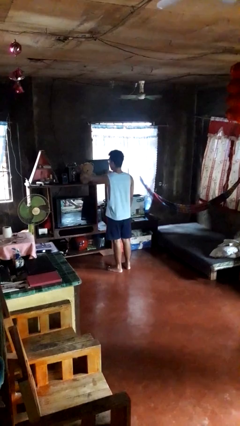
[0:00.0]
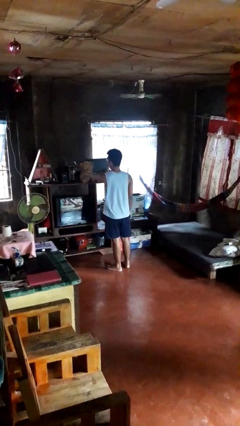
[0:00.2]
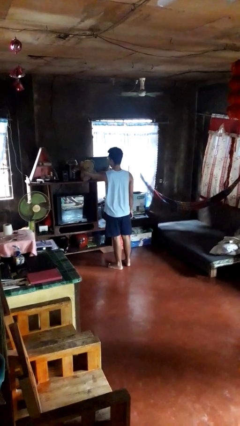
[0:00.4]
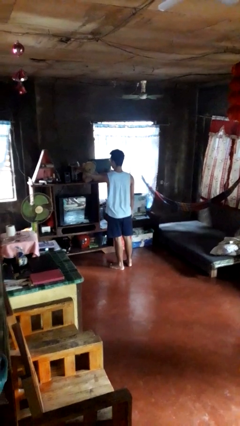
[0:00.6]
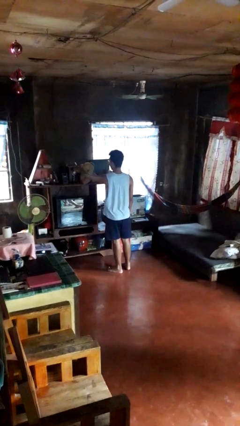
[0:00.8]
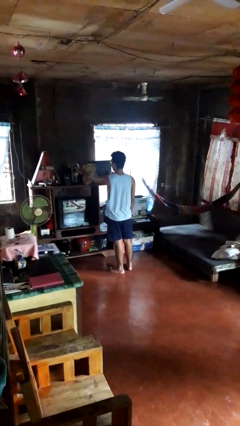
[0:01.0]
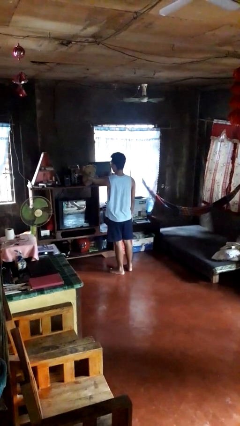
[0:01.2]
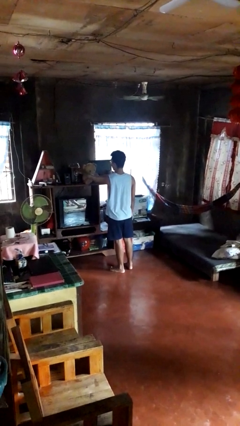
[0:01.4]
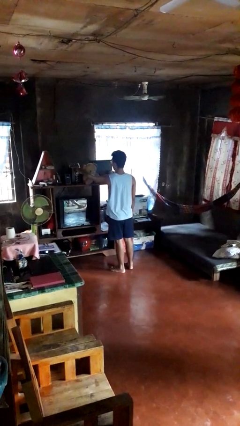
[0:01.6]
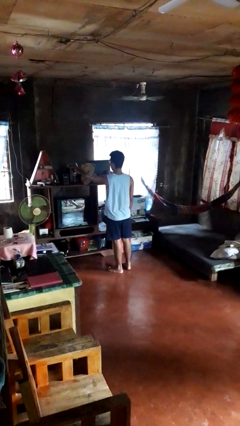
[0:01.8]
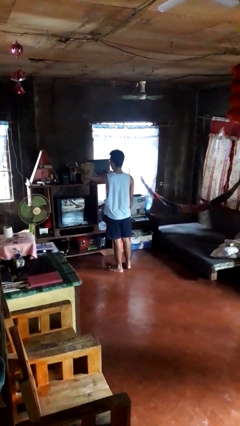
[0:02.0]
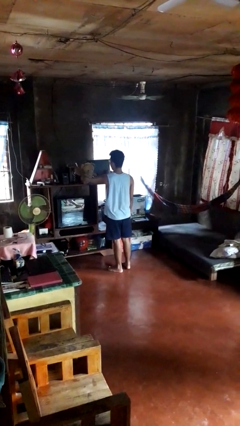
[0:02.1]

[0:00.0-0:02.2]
person taps object with finger

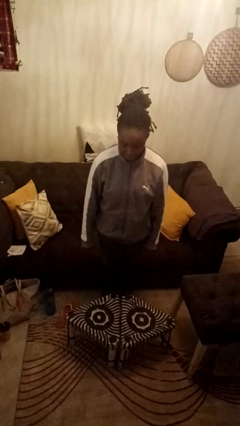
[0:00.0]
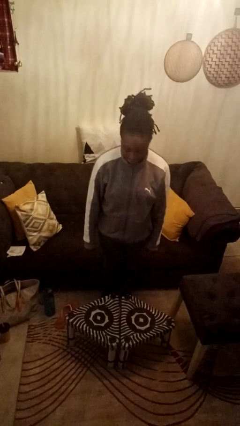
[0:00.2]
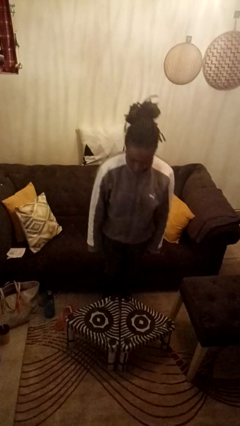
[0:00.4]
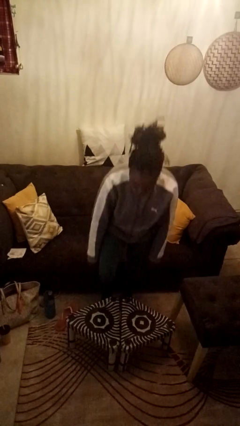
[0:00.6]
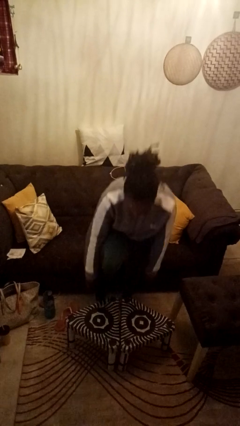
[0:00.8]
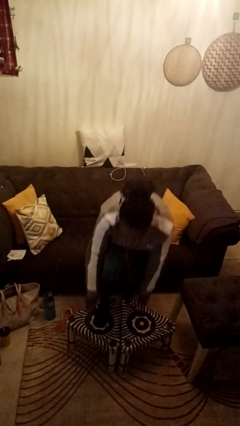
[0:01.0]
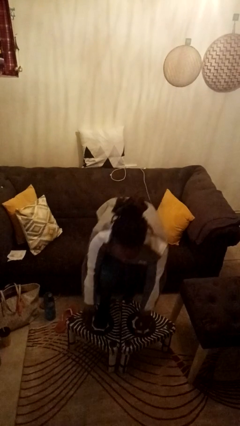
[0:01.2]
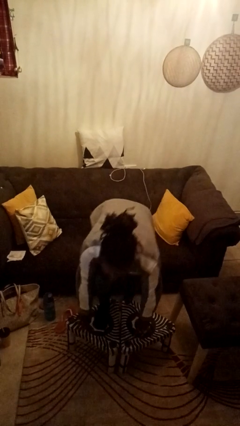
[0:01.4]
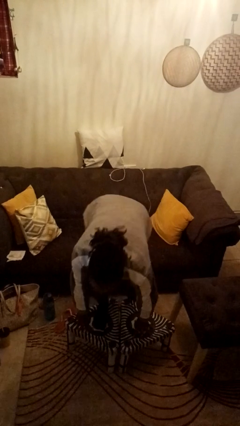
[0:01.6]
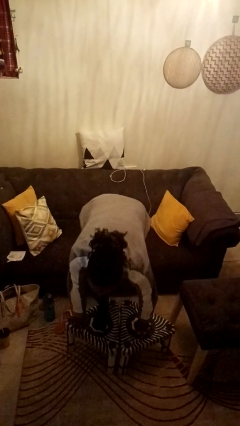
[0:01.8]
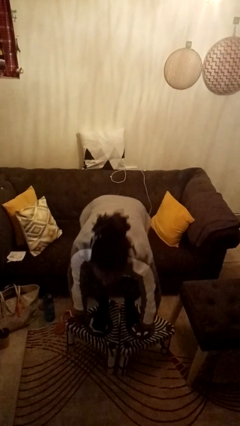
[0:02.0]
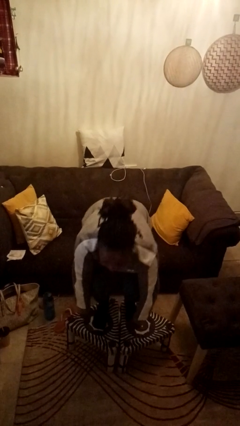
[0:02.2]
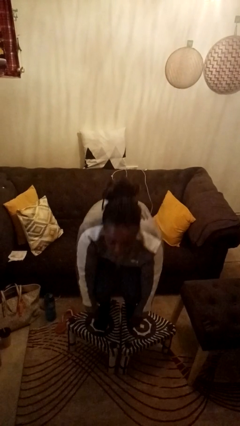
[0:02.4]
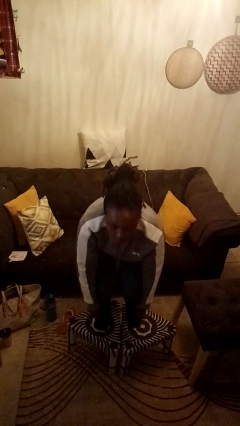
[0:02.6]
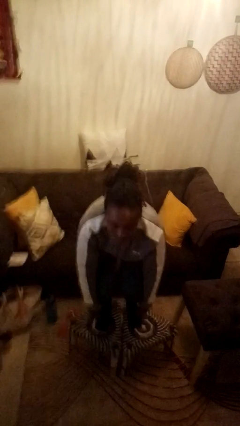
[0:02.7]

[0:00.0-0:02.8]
person climbs on table

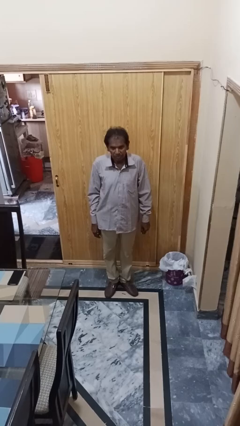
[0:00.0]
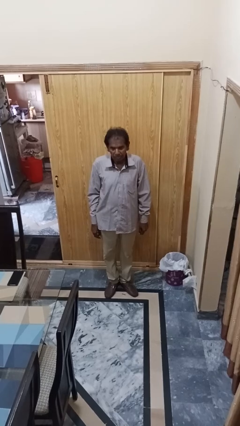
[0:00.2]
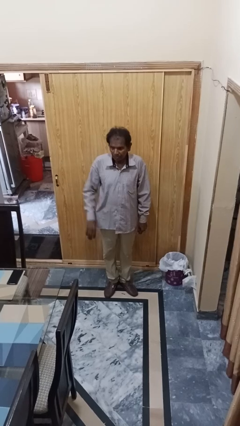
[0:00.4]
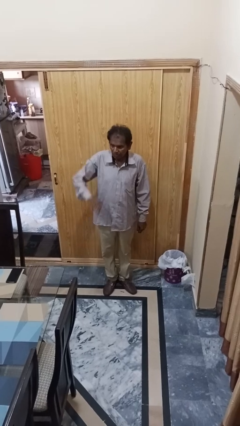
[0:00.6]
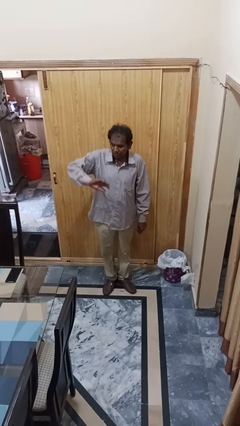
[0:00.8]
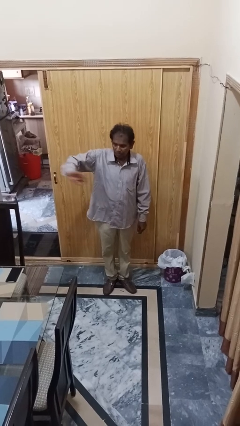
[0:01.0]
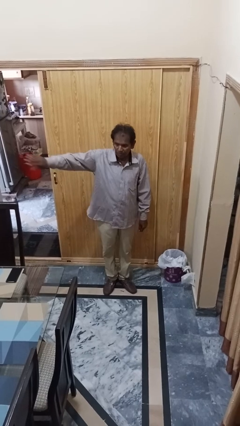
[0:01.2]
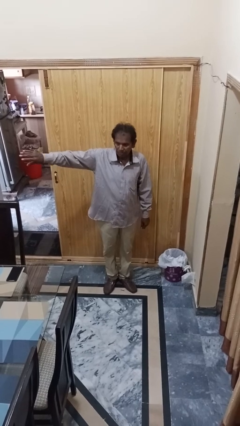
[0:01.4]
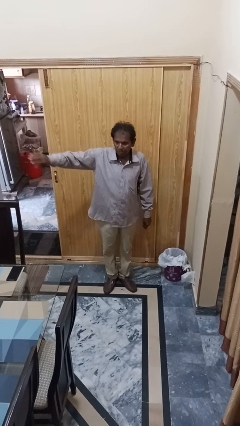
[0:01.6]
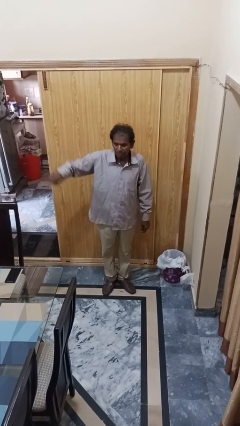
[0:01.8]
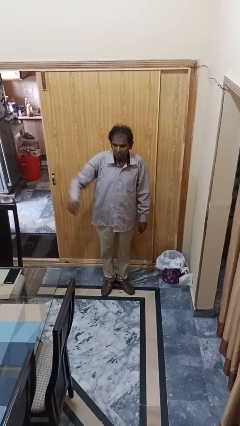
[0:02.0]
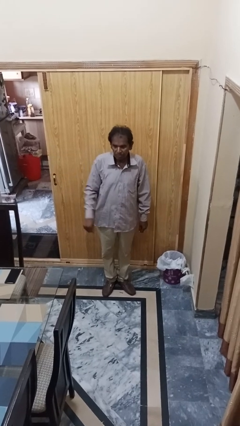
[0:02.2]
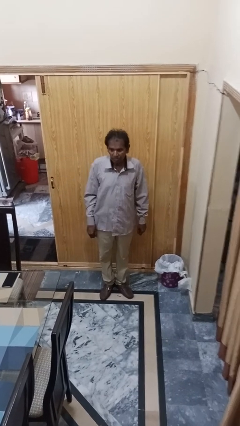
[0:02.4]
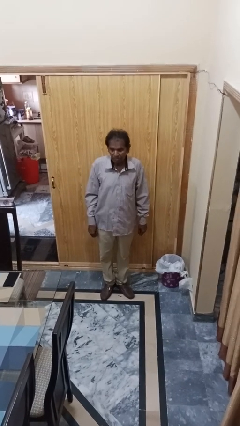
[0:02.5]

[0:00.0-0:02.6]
person gestures swipe left

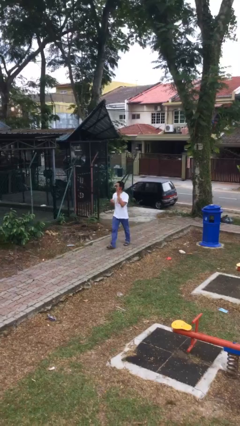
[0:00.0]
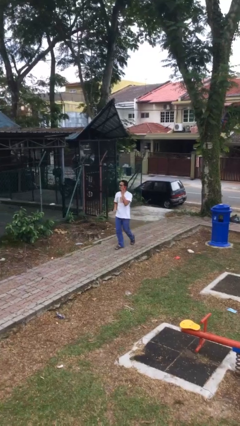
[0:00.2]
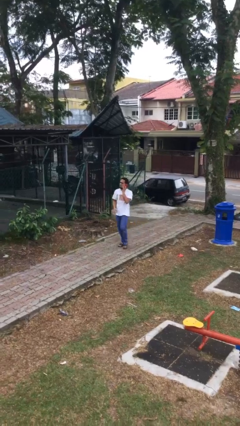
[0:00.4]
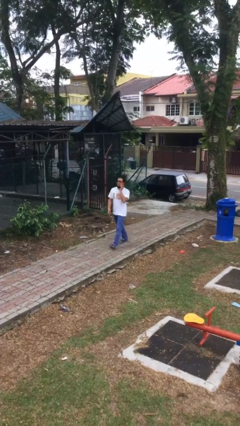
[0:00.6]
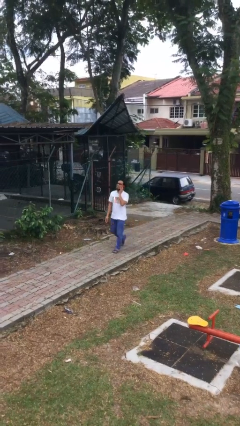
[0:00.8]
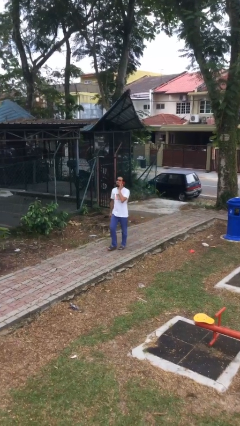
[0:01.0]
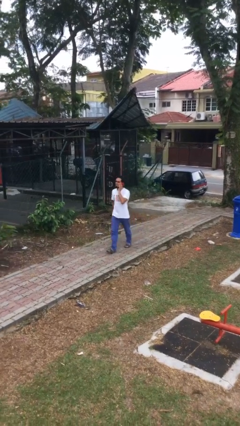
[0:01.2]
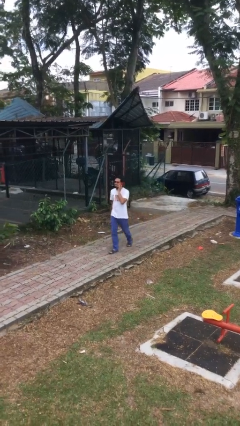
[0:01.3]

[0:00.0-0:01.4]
person talks on phone

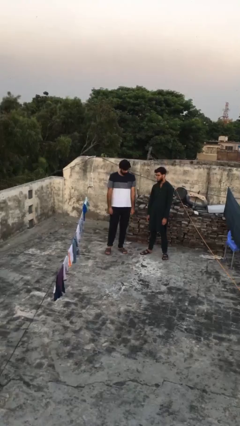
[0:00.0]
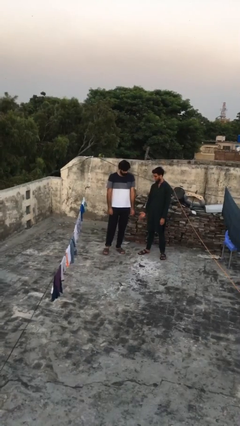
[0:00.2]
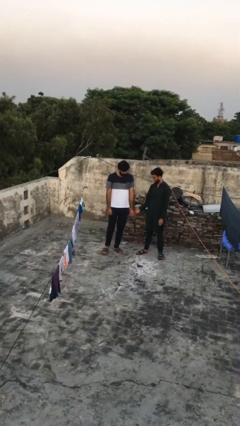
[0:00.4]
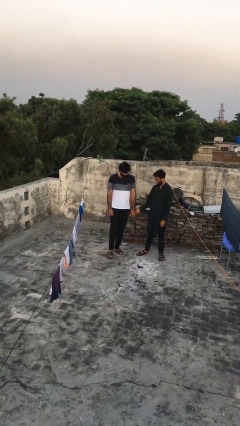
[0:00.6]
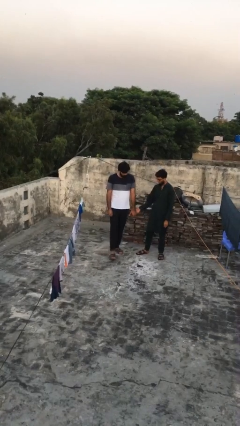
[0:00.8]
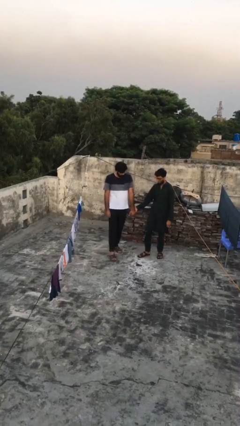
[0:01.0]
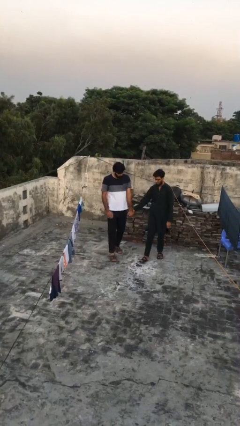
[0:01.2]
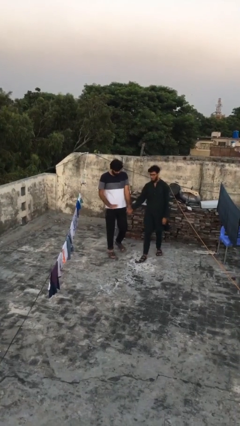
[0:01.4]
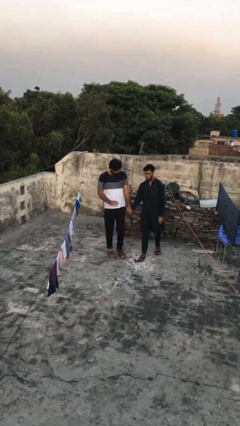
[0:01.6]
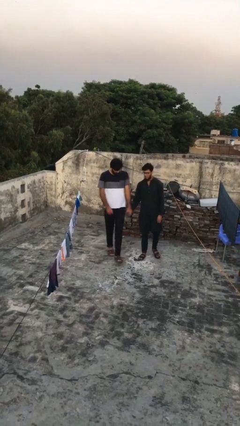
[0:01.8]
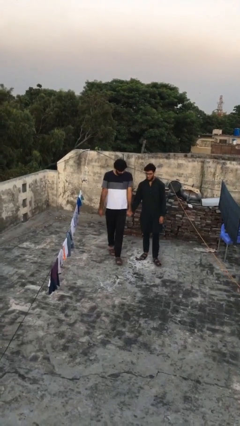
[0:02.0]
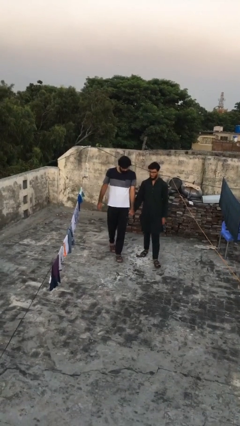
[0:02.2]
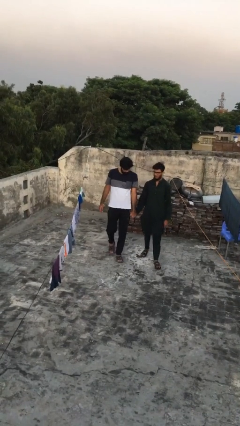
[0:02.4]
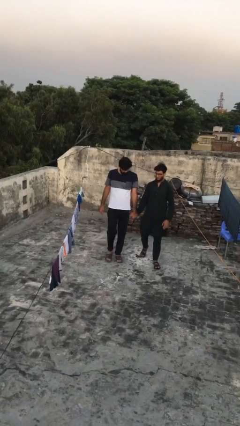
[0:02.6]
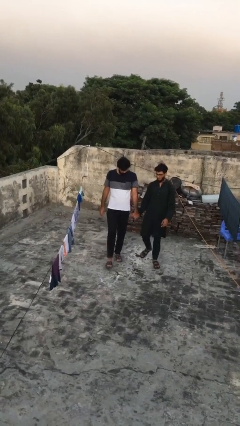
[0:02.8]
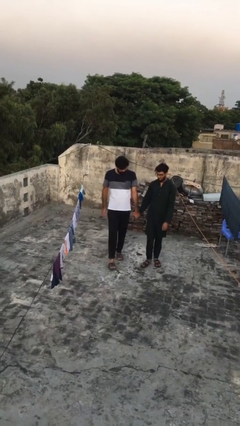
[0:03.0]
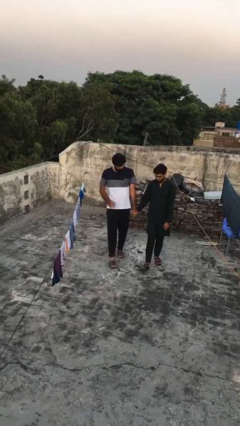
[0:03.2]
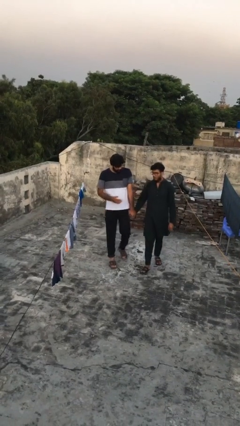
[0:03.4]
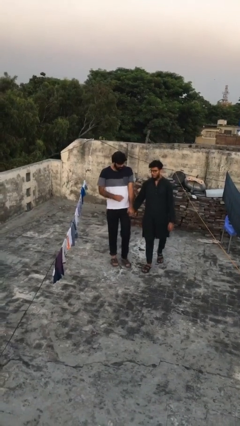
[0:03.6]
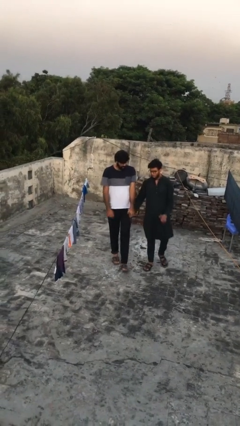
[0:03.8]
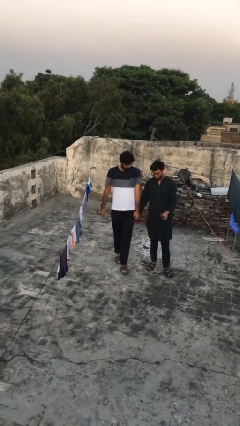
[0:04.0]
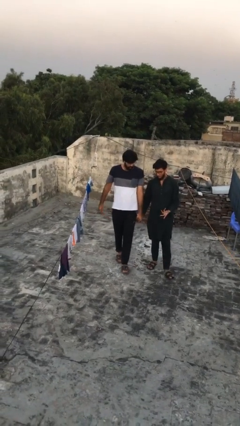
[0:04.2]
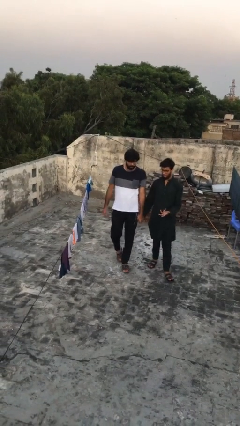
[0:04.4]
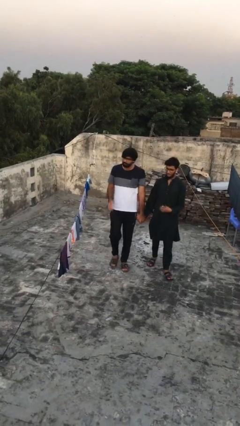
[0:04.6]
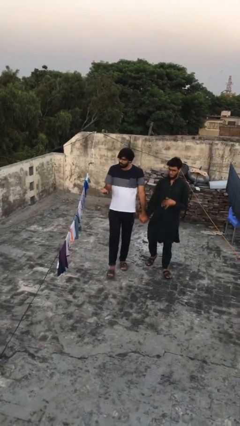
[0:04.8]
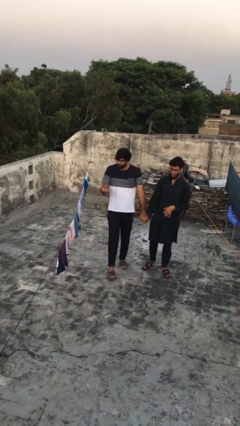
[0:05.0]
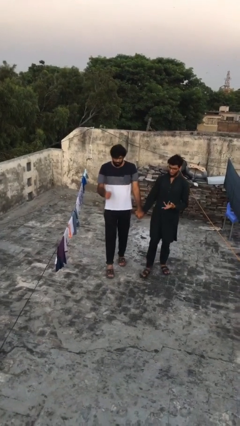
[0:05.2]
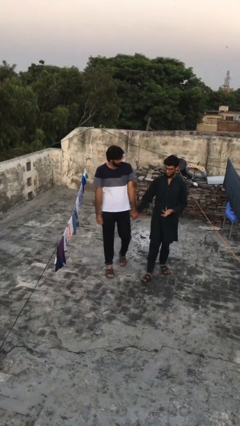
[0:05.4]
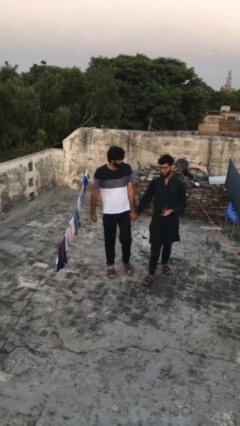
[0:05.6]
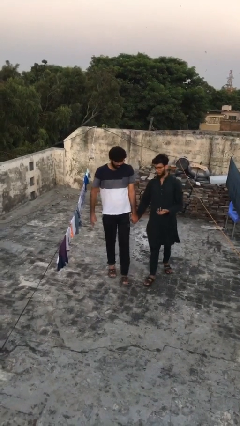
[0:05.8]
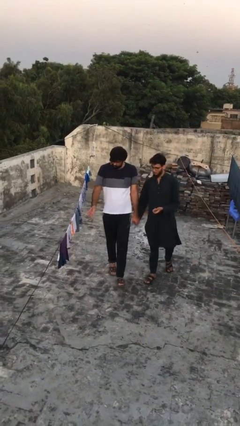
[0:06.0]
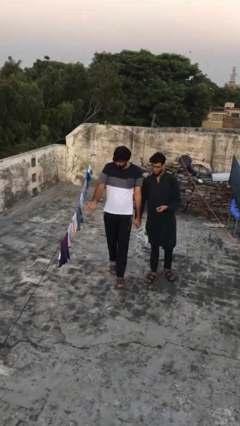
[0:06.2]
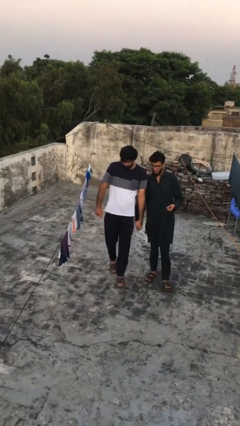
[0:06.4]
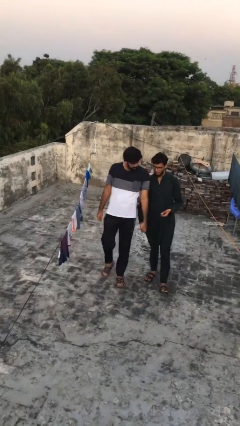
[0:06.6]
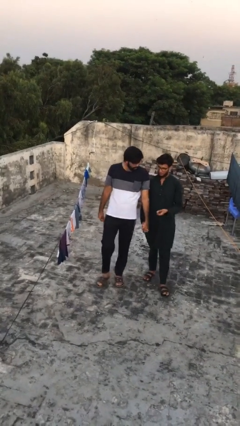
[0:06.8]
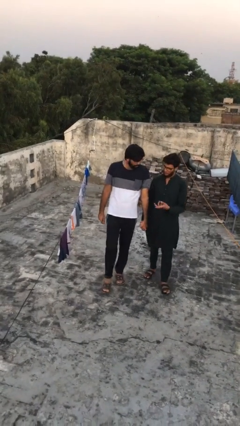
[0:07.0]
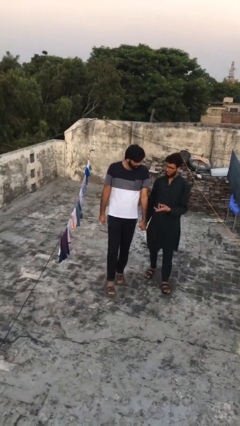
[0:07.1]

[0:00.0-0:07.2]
person holds hand

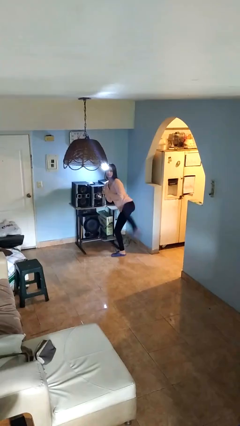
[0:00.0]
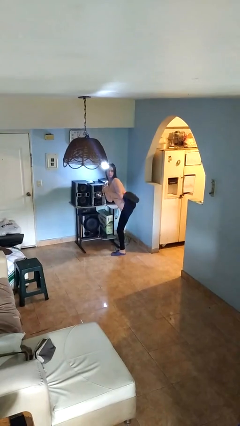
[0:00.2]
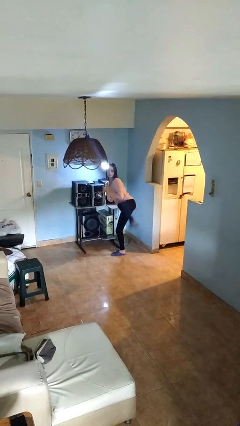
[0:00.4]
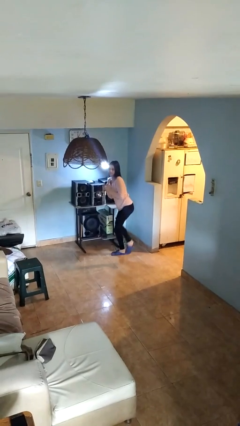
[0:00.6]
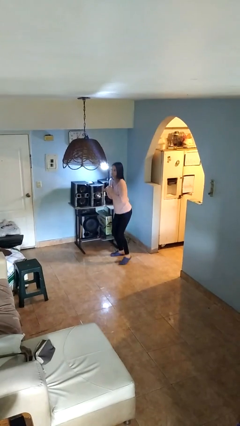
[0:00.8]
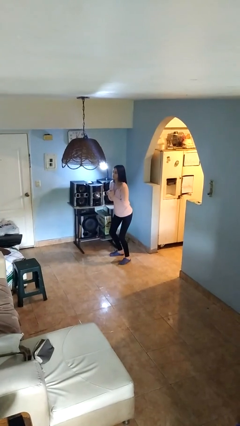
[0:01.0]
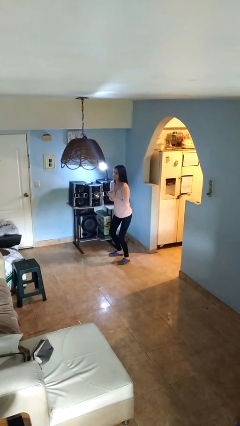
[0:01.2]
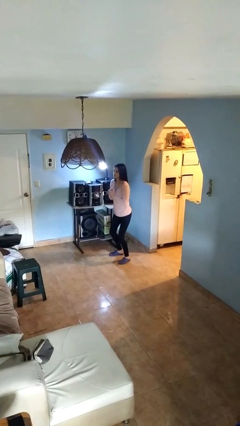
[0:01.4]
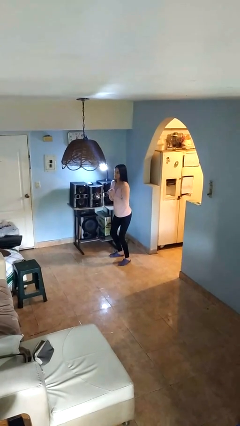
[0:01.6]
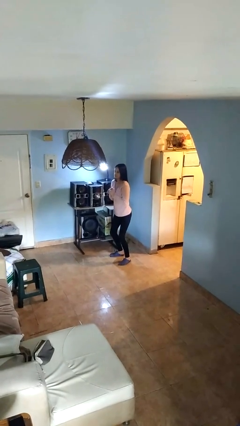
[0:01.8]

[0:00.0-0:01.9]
person karate kicks
